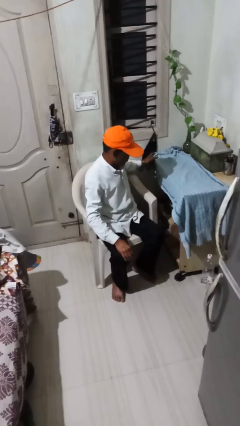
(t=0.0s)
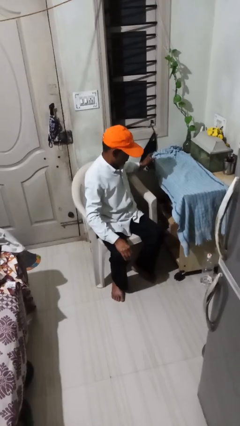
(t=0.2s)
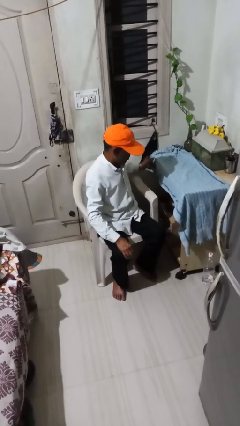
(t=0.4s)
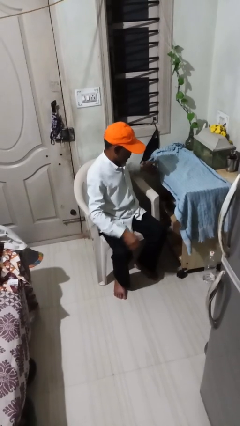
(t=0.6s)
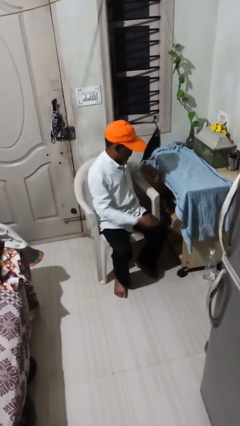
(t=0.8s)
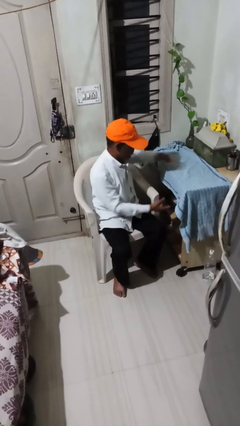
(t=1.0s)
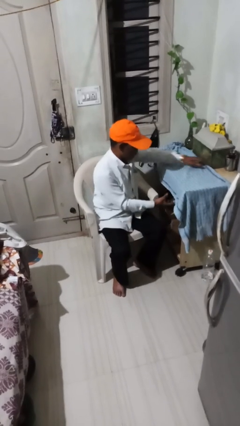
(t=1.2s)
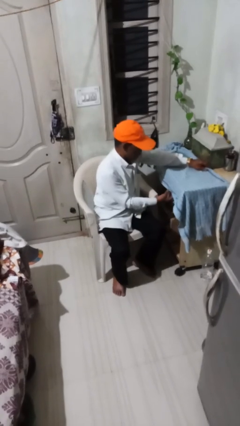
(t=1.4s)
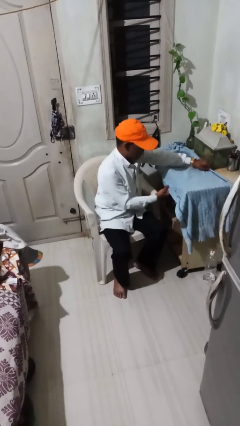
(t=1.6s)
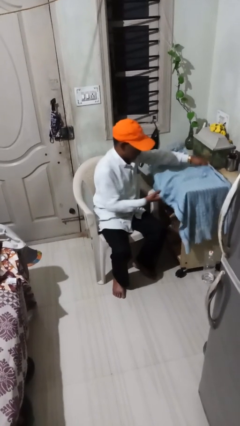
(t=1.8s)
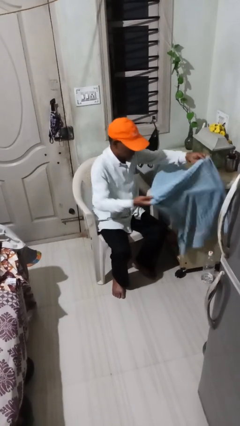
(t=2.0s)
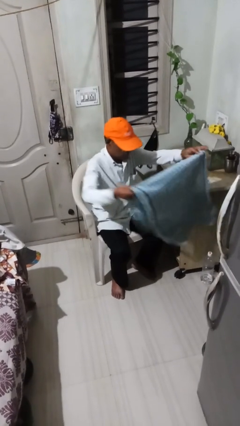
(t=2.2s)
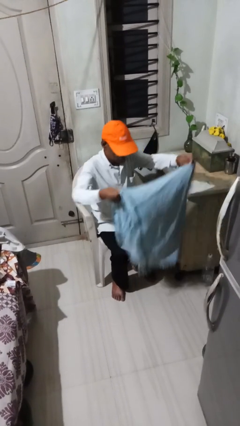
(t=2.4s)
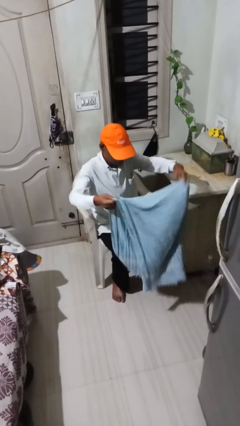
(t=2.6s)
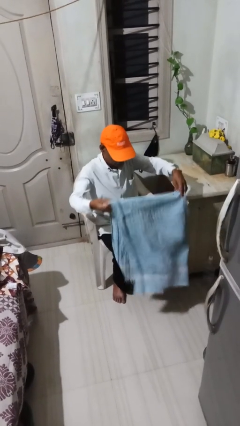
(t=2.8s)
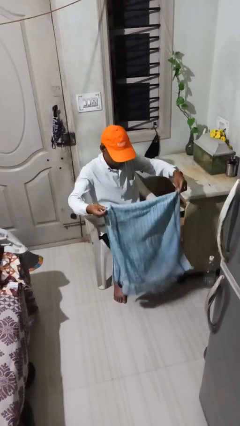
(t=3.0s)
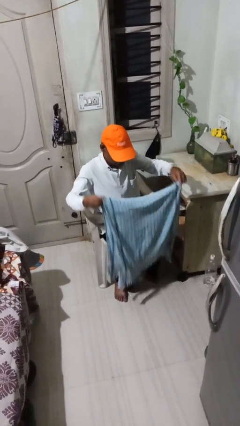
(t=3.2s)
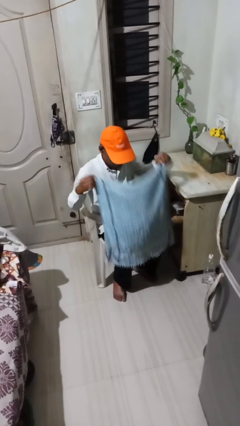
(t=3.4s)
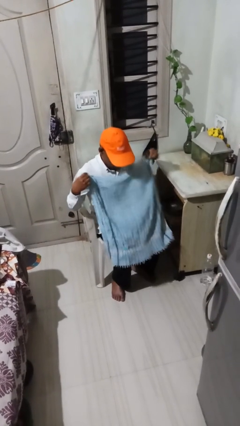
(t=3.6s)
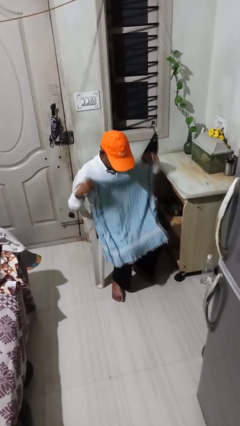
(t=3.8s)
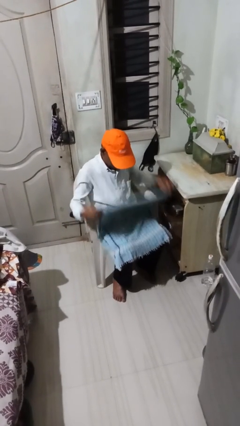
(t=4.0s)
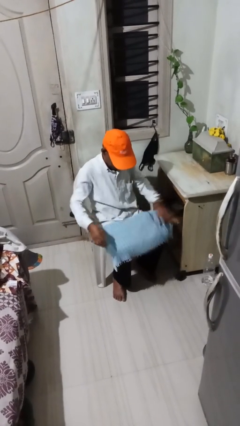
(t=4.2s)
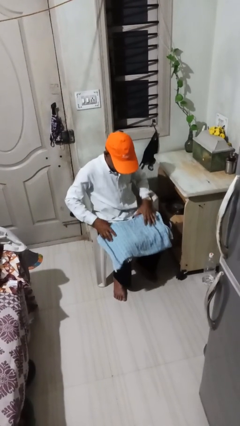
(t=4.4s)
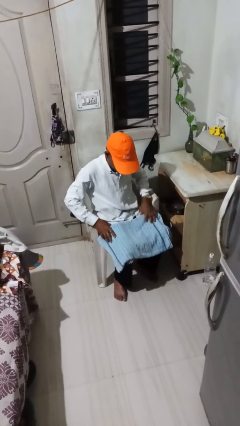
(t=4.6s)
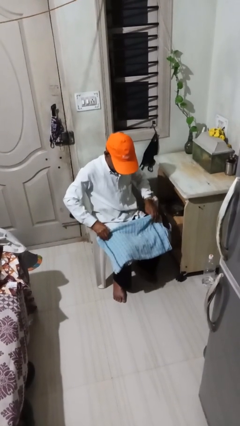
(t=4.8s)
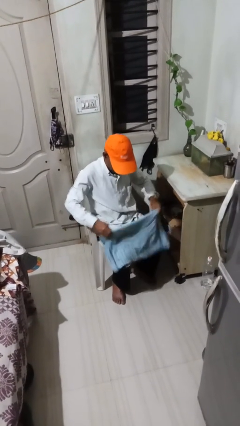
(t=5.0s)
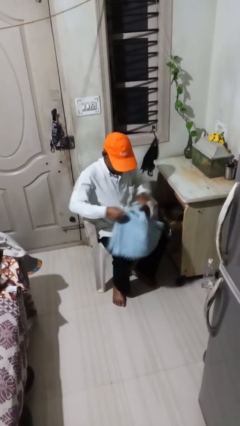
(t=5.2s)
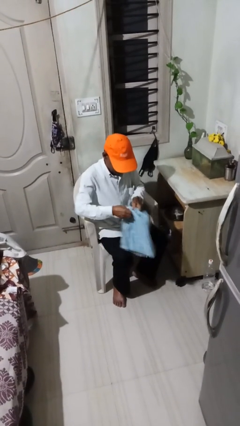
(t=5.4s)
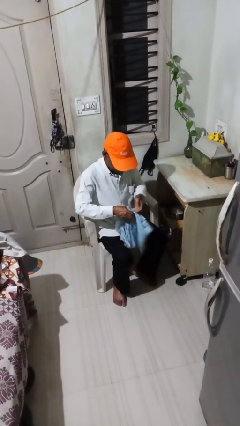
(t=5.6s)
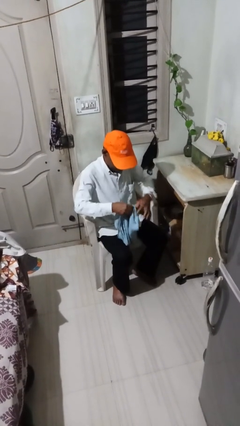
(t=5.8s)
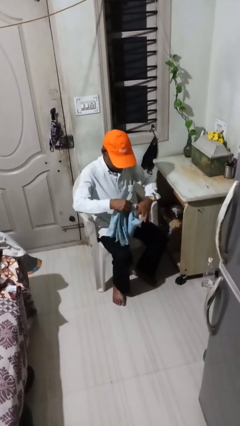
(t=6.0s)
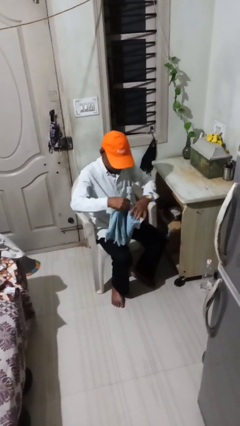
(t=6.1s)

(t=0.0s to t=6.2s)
person folds tablecloth

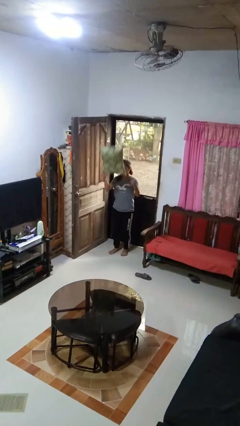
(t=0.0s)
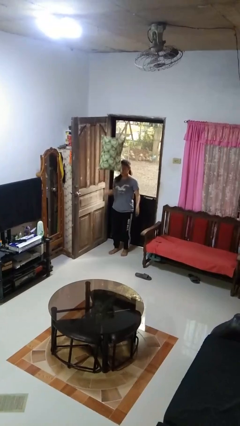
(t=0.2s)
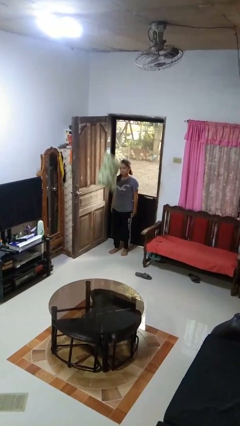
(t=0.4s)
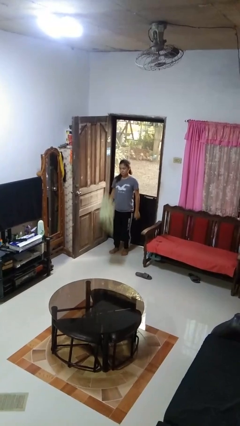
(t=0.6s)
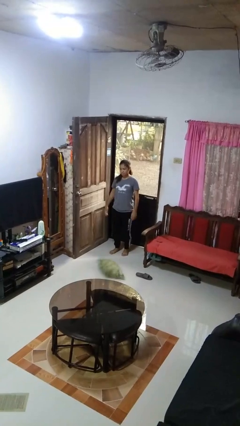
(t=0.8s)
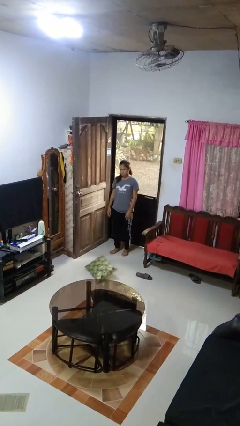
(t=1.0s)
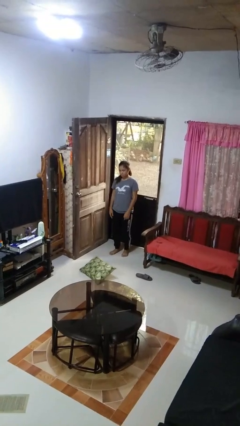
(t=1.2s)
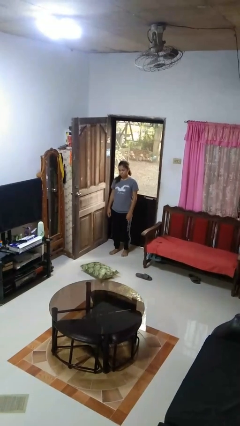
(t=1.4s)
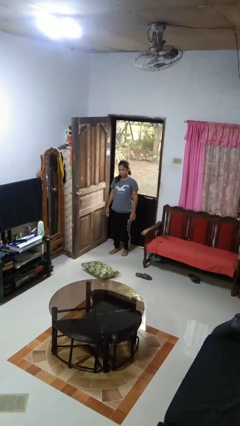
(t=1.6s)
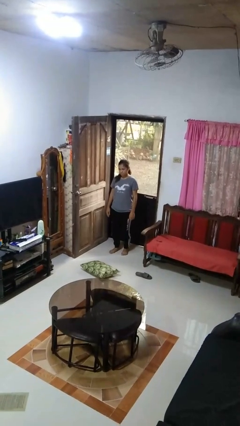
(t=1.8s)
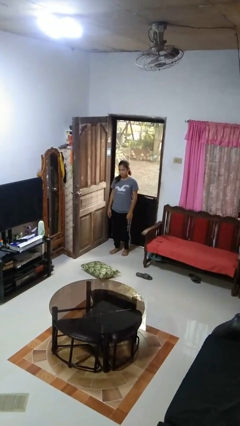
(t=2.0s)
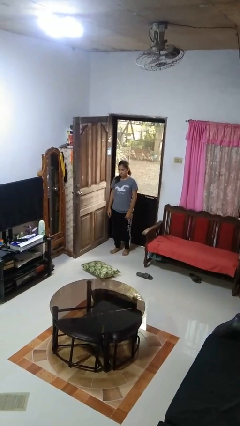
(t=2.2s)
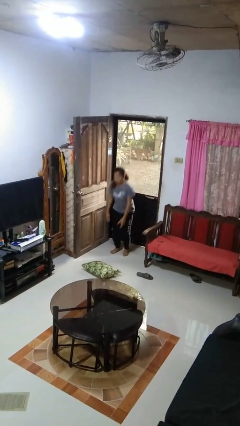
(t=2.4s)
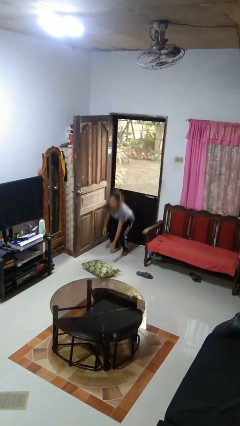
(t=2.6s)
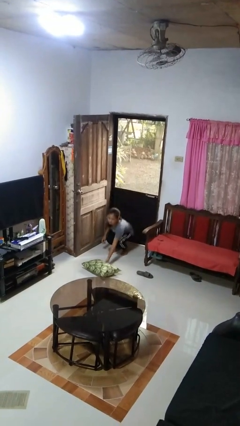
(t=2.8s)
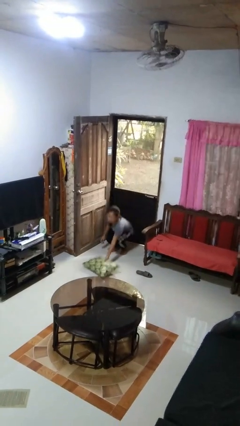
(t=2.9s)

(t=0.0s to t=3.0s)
person throws object into air

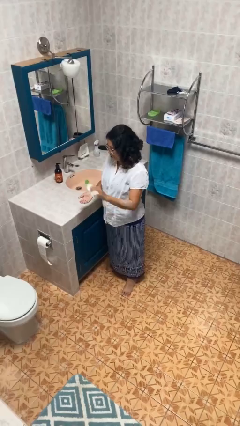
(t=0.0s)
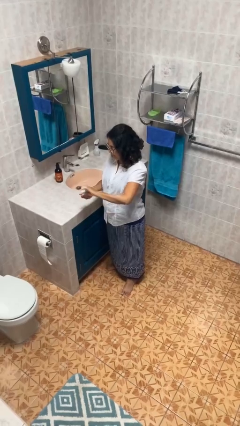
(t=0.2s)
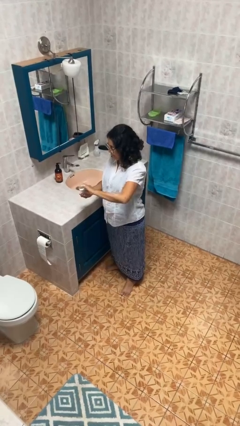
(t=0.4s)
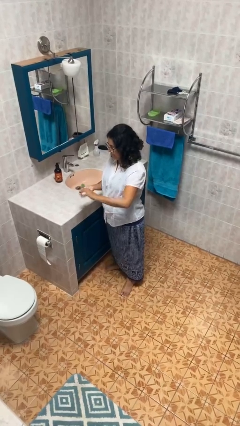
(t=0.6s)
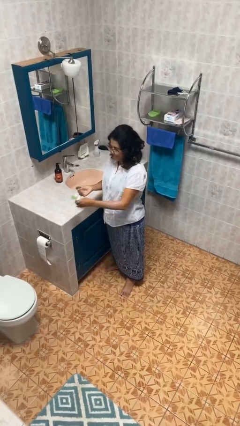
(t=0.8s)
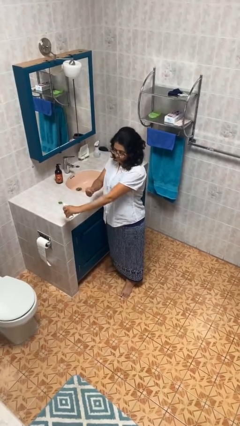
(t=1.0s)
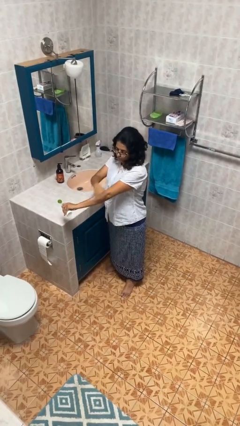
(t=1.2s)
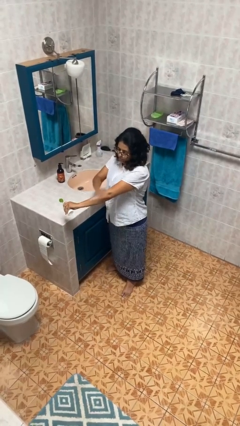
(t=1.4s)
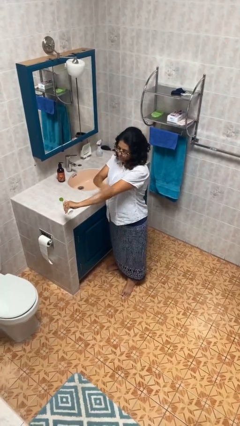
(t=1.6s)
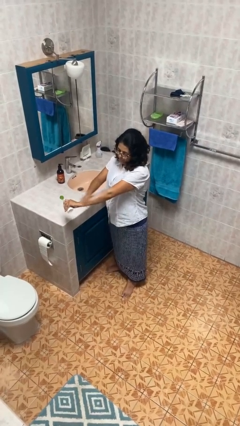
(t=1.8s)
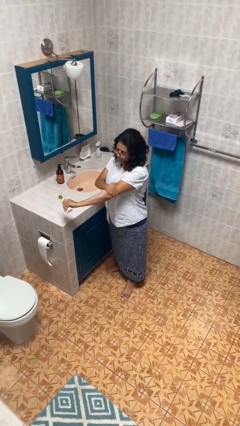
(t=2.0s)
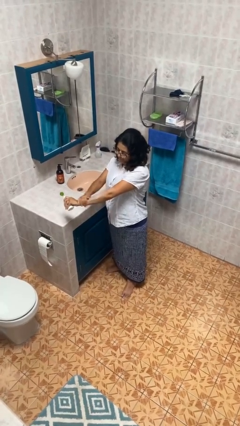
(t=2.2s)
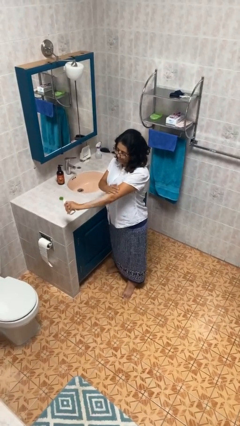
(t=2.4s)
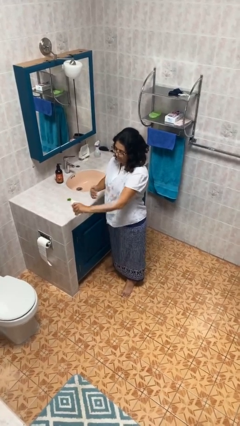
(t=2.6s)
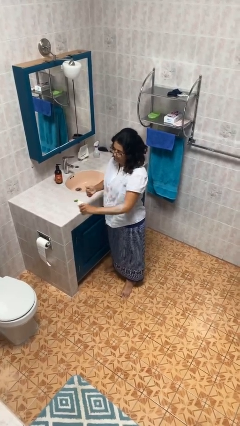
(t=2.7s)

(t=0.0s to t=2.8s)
person applies sunscreen

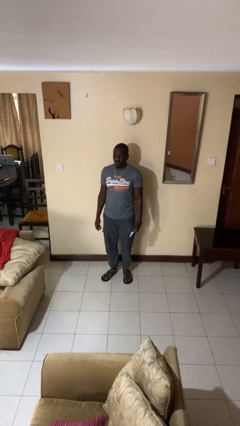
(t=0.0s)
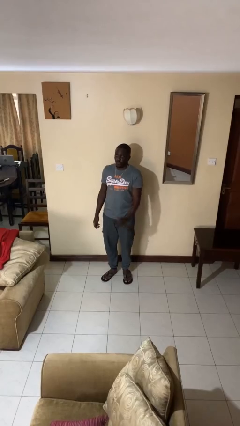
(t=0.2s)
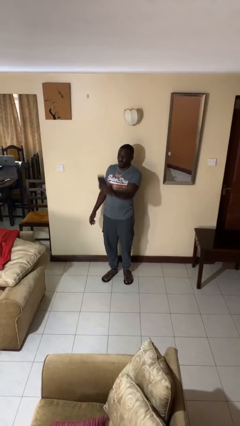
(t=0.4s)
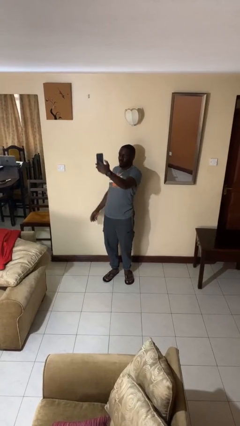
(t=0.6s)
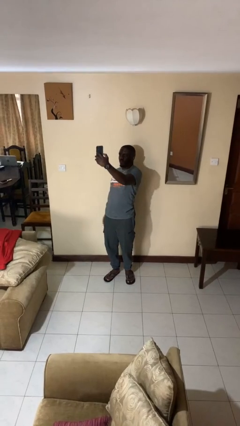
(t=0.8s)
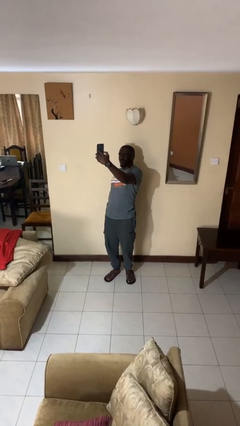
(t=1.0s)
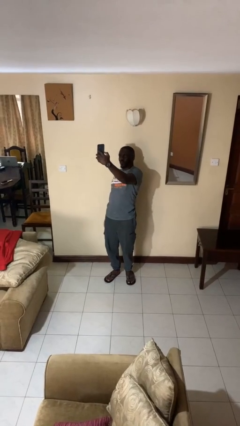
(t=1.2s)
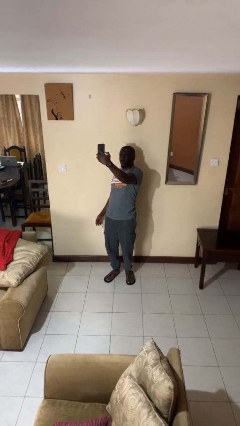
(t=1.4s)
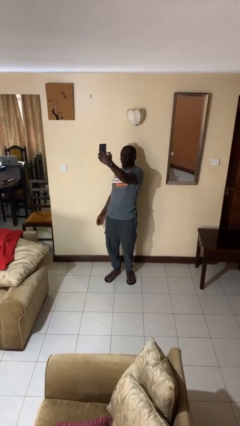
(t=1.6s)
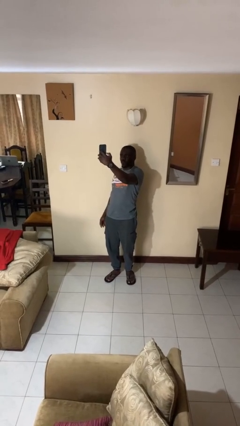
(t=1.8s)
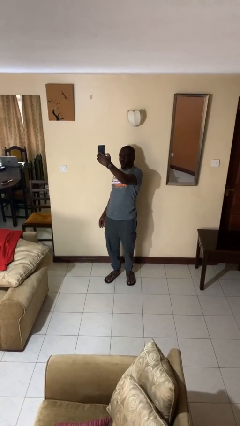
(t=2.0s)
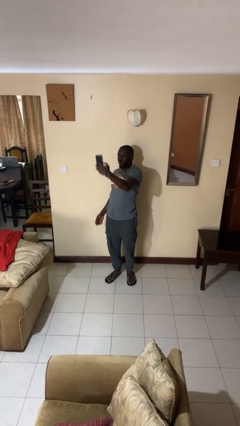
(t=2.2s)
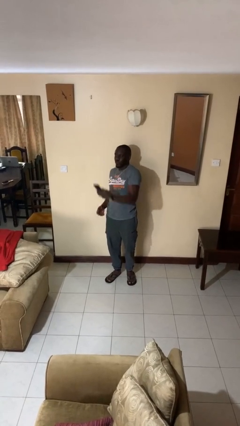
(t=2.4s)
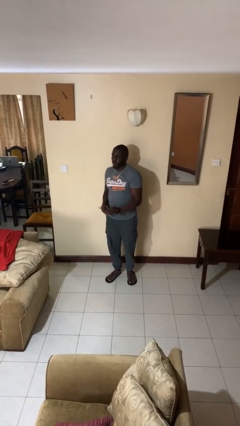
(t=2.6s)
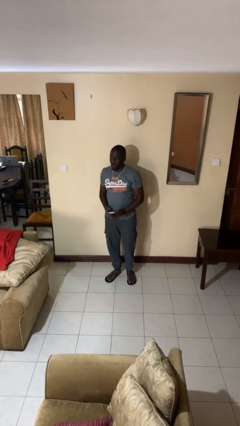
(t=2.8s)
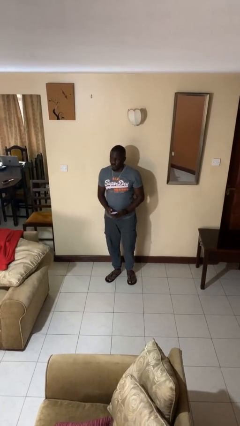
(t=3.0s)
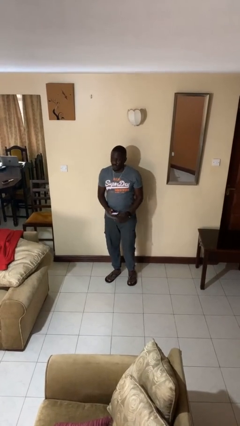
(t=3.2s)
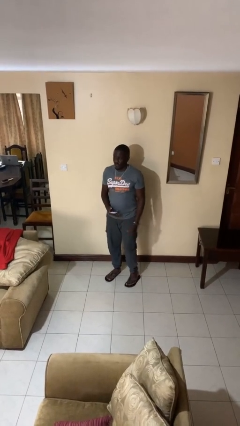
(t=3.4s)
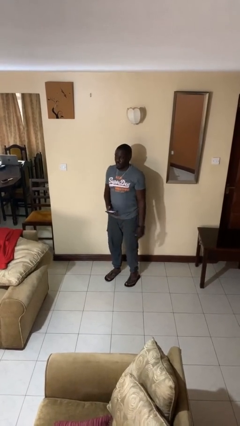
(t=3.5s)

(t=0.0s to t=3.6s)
person takes selfie

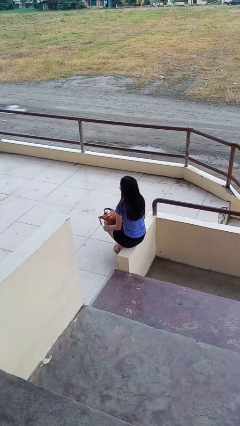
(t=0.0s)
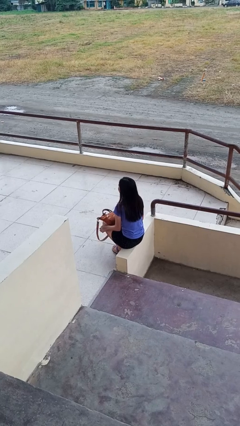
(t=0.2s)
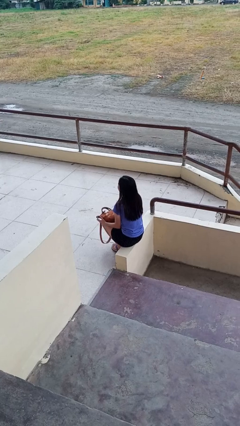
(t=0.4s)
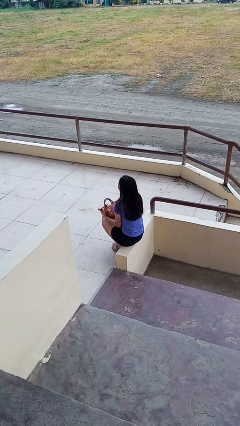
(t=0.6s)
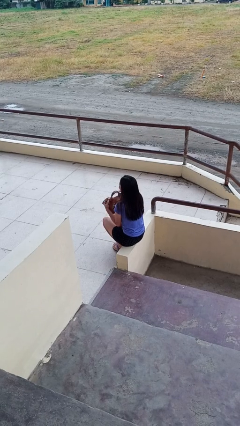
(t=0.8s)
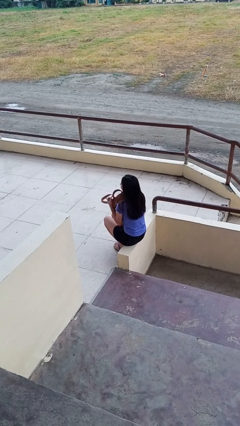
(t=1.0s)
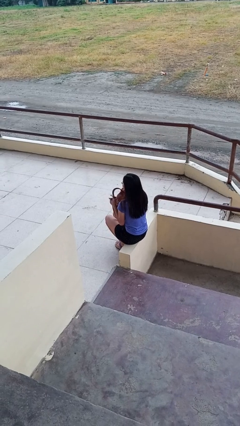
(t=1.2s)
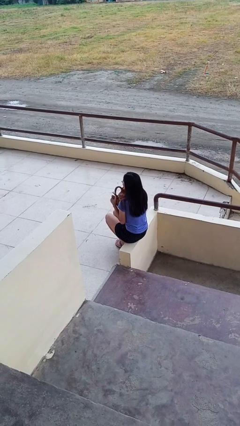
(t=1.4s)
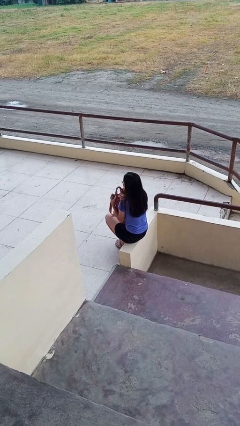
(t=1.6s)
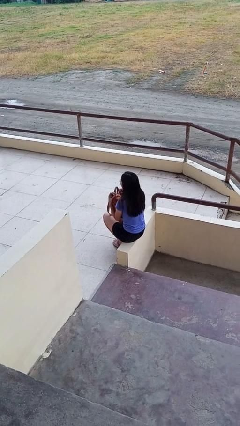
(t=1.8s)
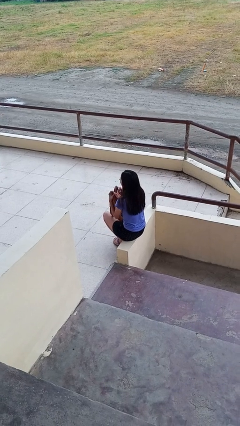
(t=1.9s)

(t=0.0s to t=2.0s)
person squeezes object

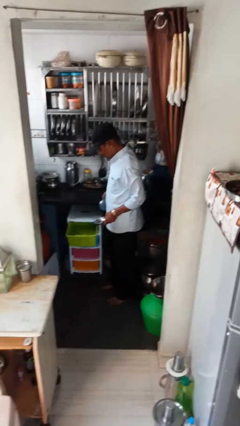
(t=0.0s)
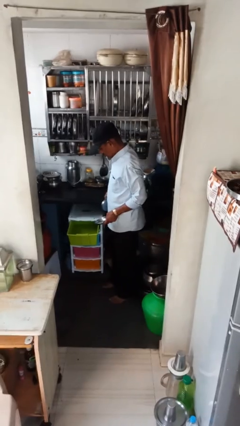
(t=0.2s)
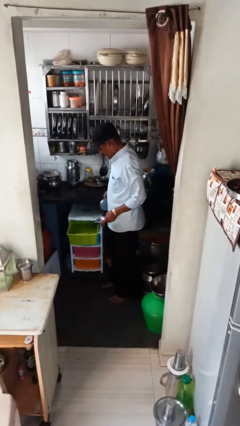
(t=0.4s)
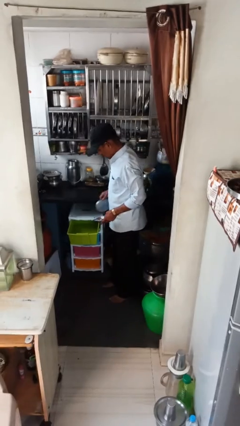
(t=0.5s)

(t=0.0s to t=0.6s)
person puts object in cabinet
